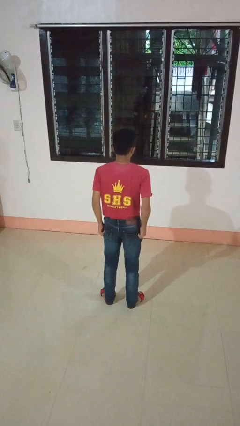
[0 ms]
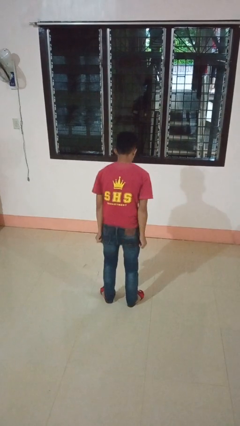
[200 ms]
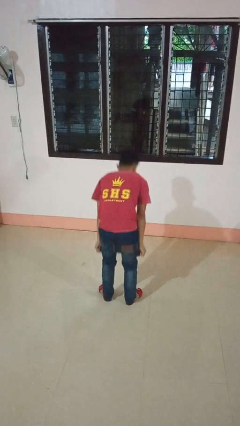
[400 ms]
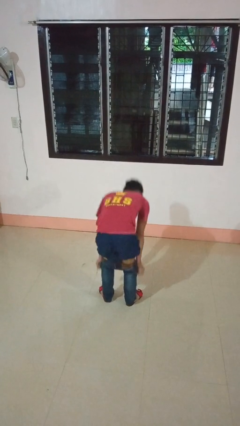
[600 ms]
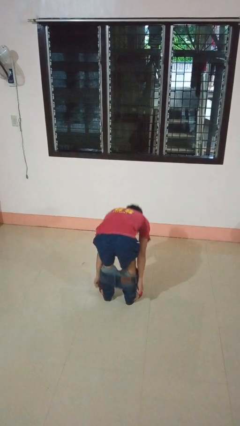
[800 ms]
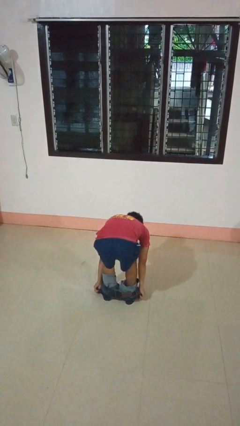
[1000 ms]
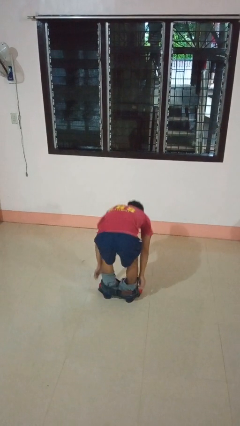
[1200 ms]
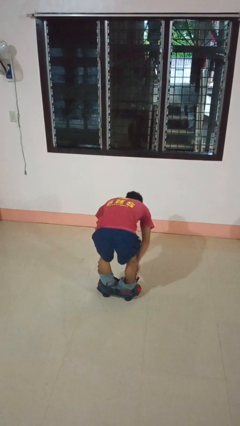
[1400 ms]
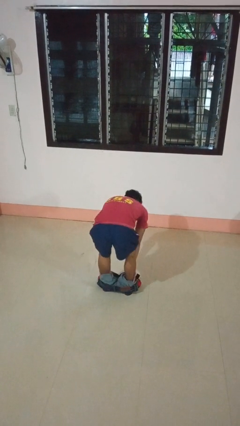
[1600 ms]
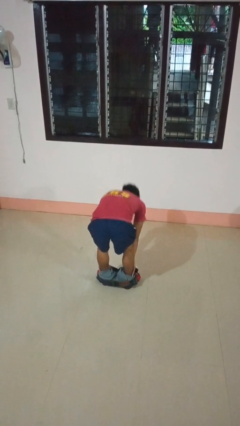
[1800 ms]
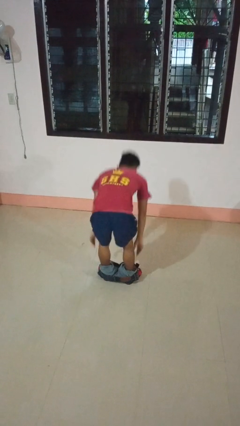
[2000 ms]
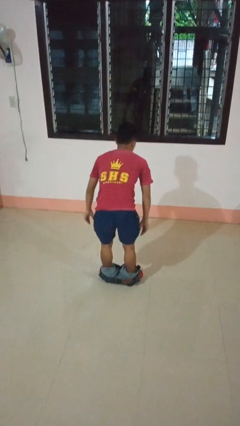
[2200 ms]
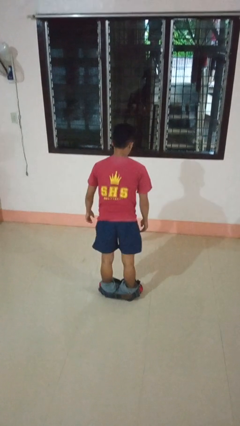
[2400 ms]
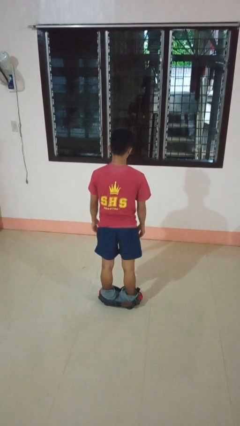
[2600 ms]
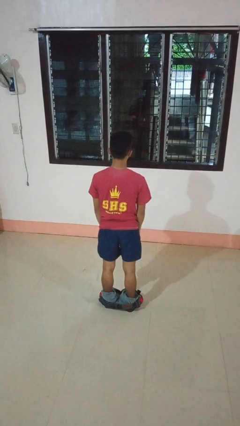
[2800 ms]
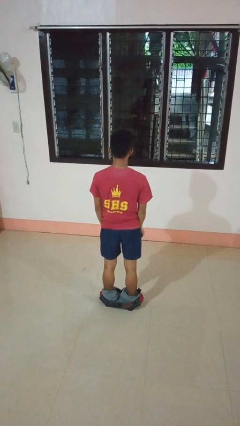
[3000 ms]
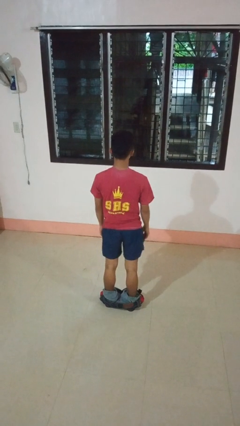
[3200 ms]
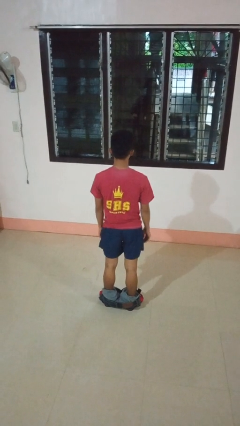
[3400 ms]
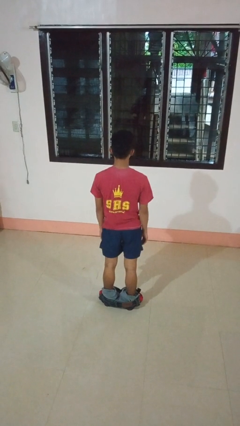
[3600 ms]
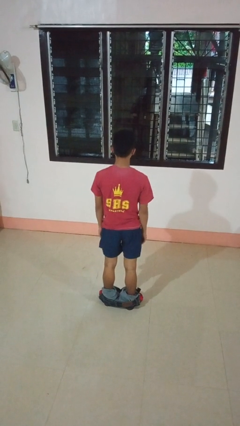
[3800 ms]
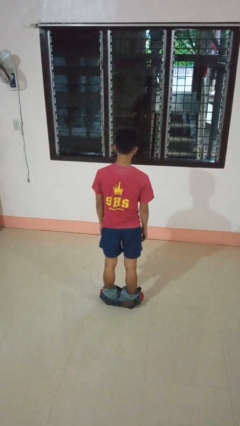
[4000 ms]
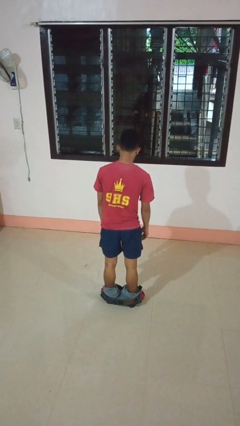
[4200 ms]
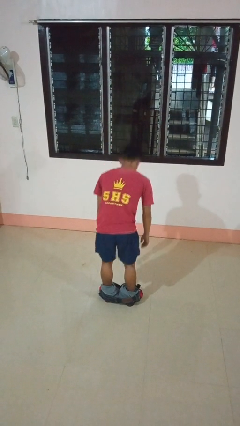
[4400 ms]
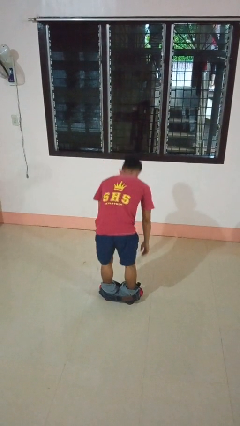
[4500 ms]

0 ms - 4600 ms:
person takes off pants

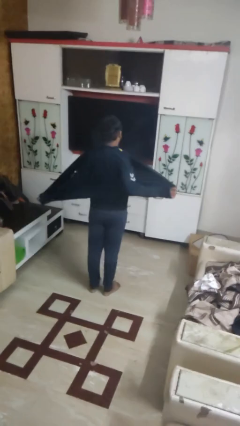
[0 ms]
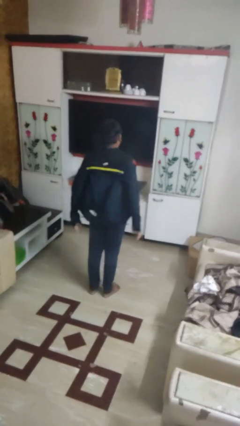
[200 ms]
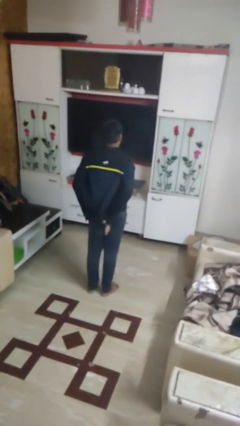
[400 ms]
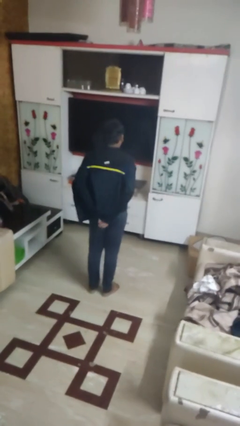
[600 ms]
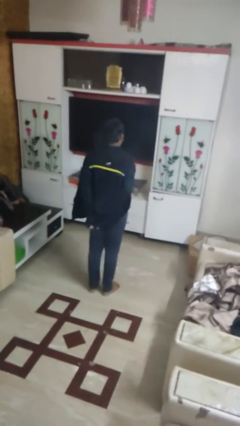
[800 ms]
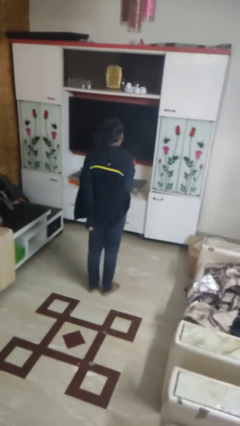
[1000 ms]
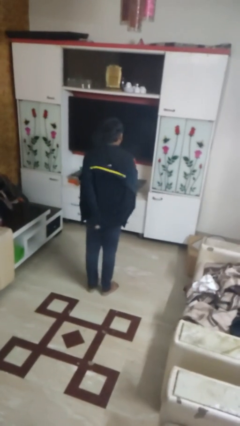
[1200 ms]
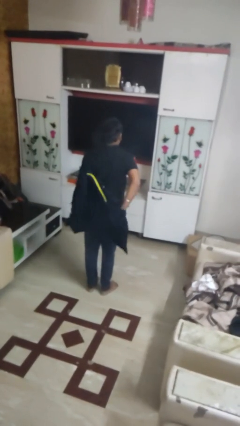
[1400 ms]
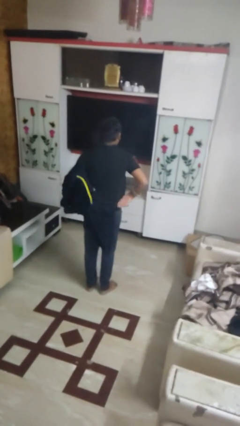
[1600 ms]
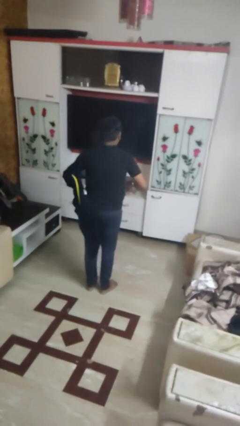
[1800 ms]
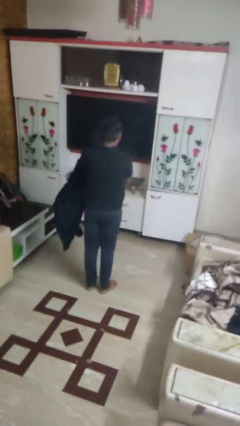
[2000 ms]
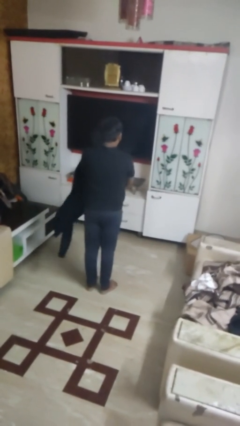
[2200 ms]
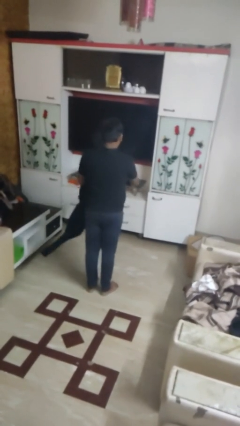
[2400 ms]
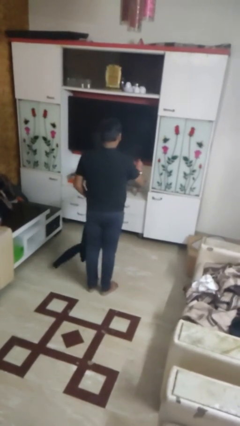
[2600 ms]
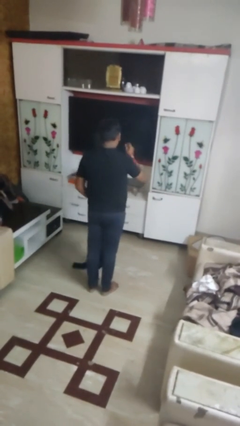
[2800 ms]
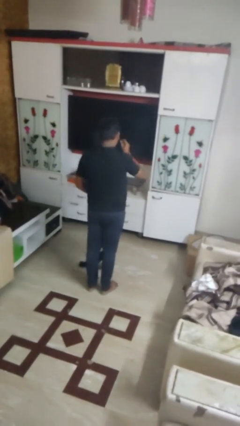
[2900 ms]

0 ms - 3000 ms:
person takes off jacket

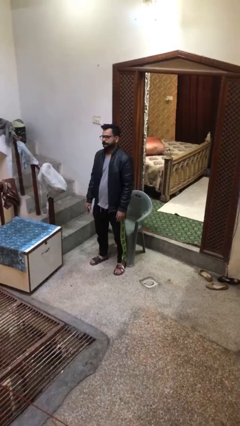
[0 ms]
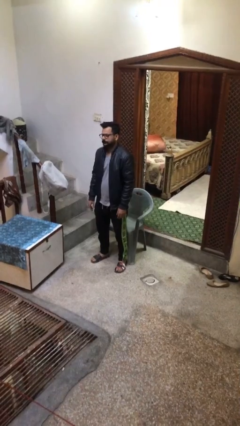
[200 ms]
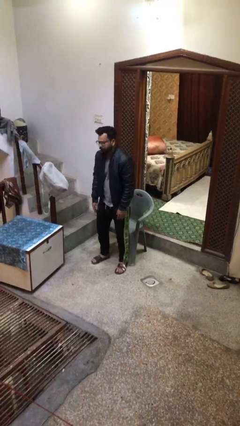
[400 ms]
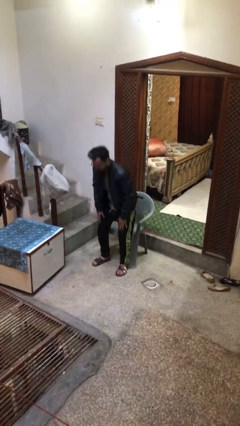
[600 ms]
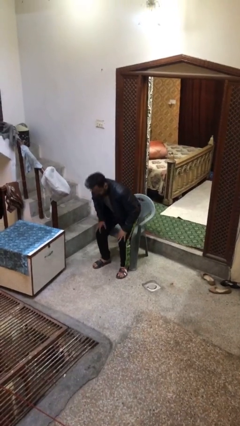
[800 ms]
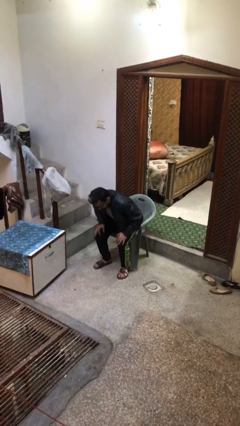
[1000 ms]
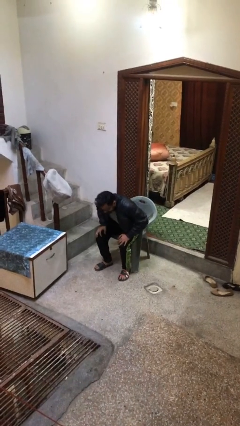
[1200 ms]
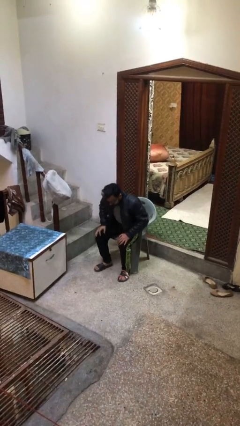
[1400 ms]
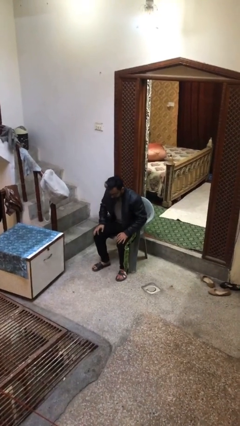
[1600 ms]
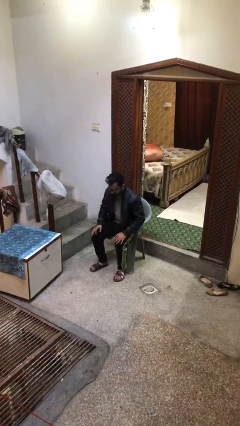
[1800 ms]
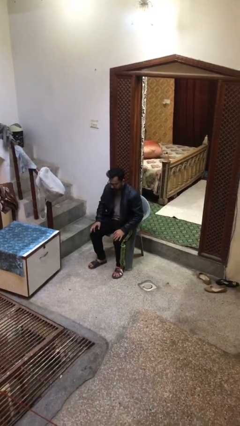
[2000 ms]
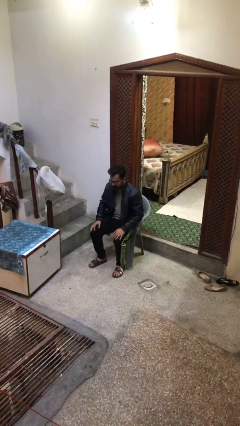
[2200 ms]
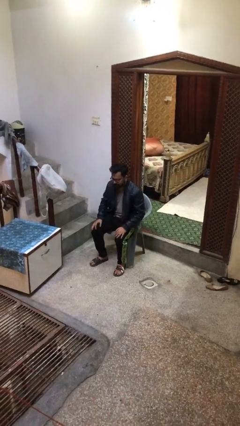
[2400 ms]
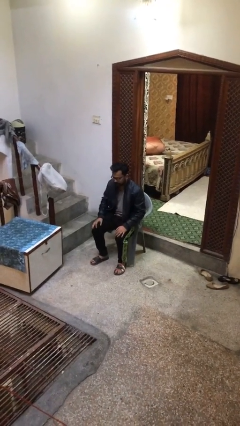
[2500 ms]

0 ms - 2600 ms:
person sits down

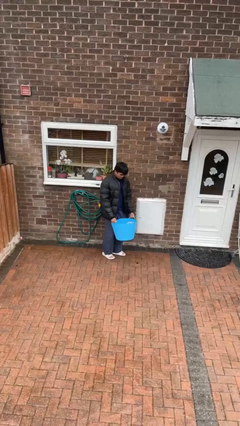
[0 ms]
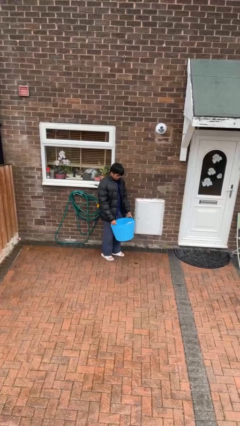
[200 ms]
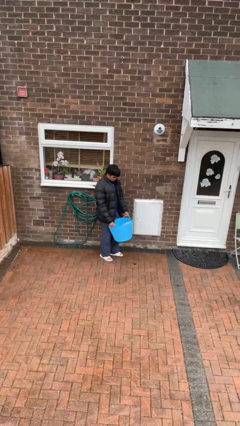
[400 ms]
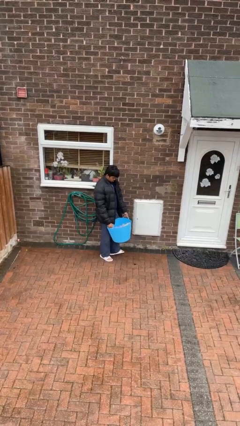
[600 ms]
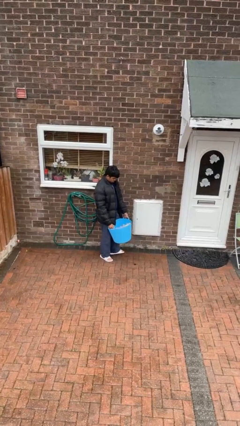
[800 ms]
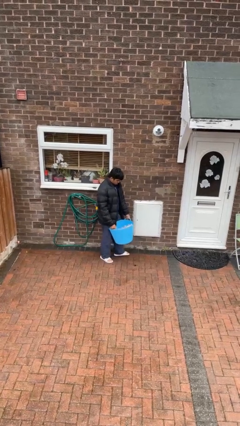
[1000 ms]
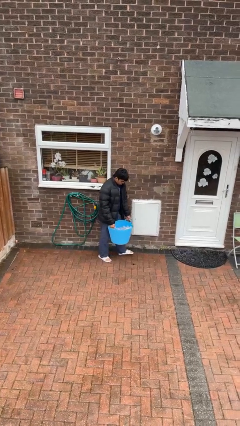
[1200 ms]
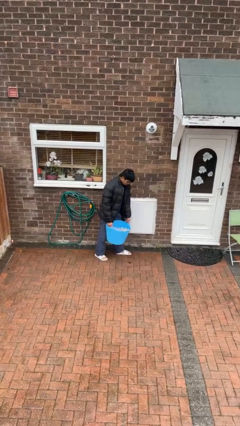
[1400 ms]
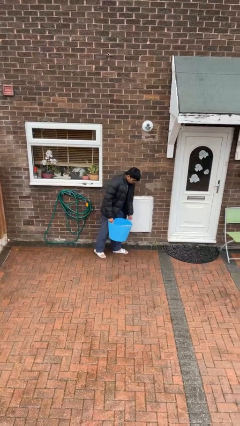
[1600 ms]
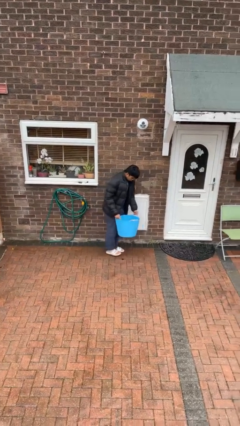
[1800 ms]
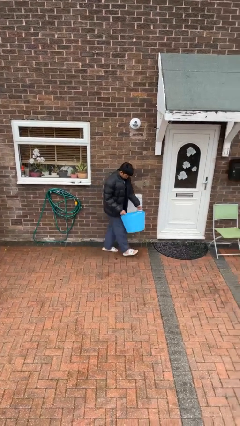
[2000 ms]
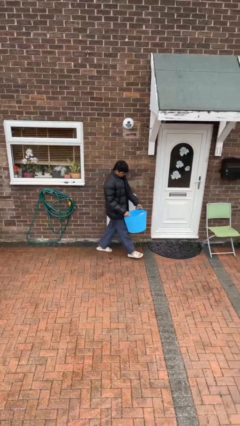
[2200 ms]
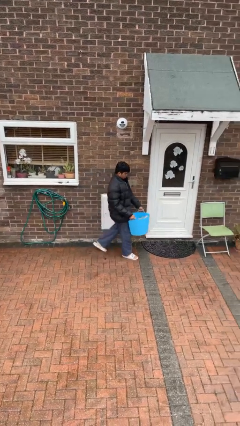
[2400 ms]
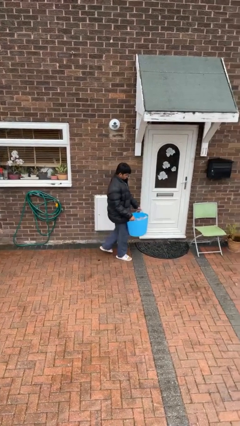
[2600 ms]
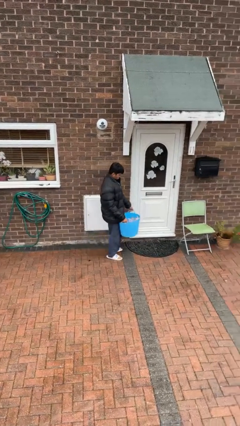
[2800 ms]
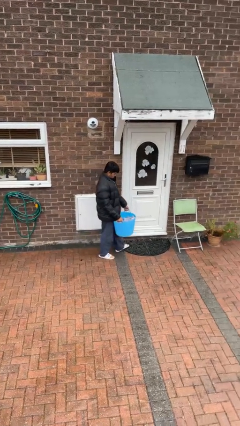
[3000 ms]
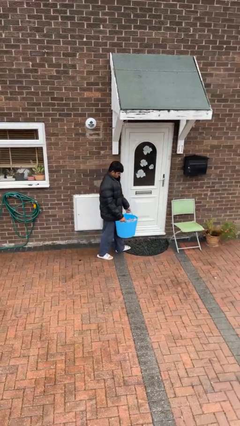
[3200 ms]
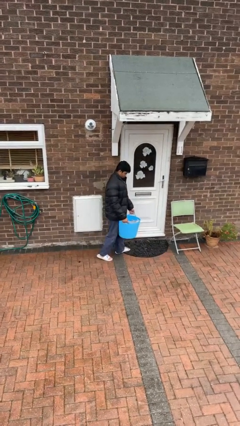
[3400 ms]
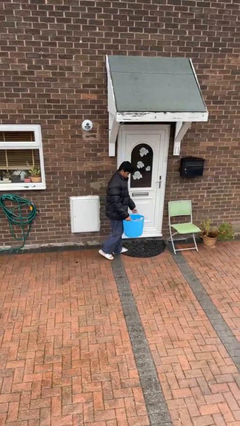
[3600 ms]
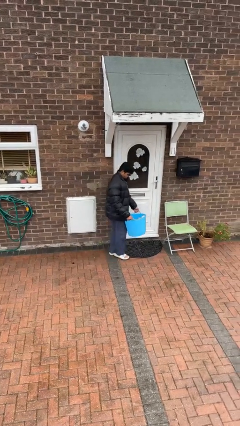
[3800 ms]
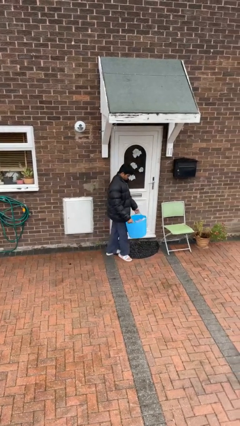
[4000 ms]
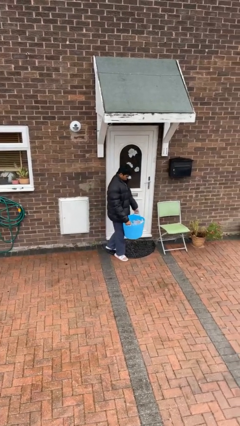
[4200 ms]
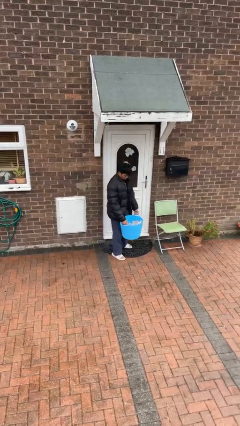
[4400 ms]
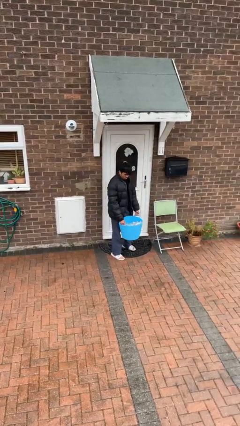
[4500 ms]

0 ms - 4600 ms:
person carries laundry basket

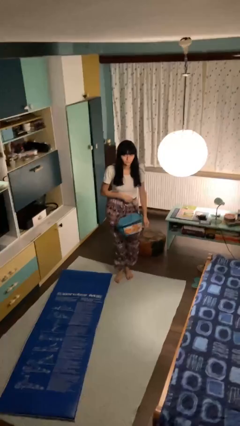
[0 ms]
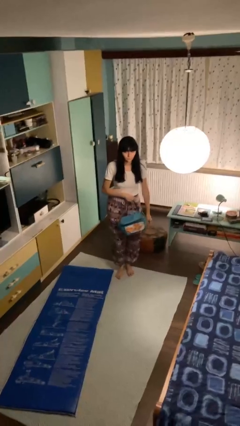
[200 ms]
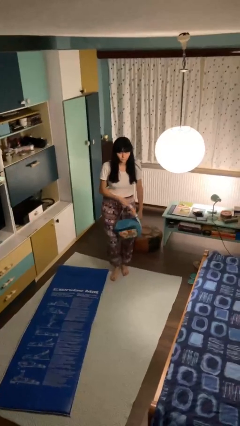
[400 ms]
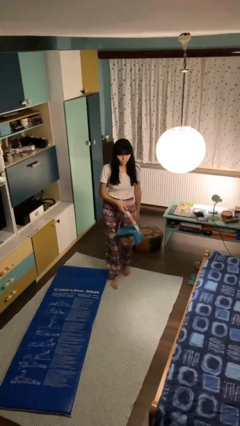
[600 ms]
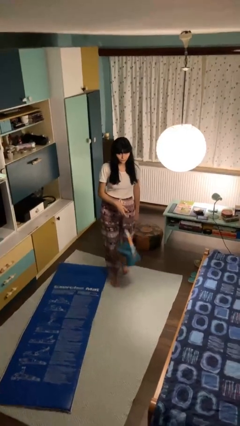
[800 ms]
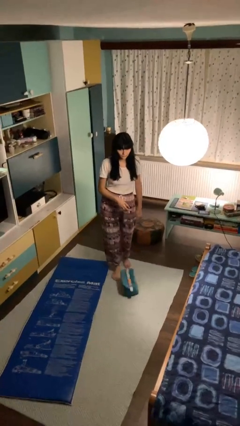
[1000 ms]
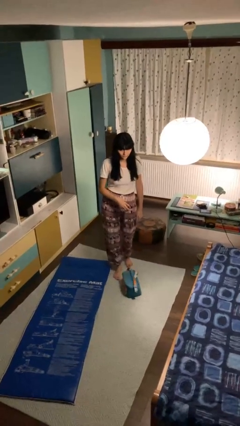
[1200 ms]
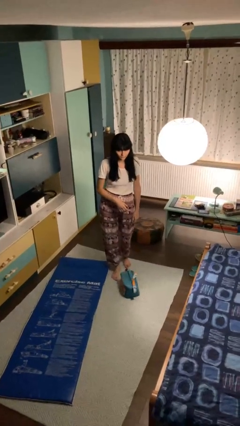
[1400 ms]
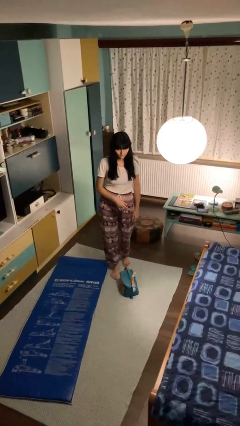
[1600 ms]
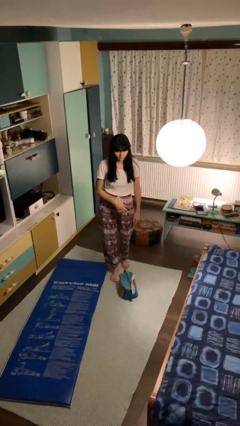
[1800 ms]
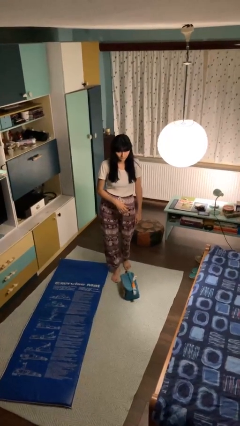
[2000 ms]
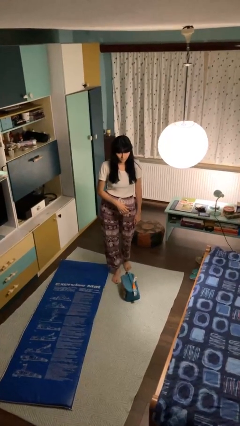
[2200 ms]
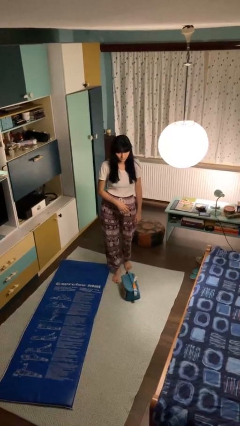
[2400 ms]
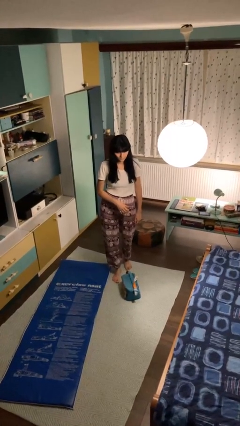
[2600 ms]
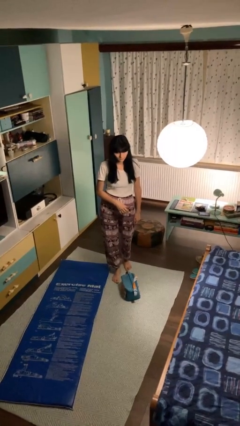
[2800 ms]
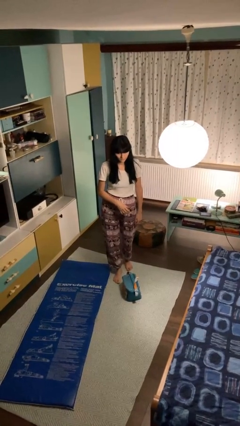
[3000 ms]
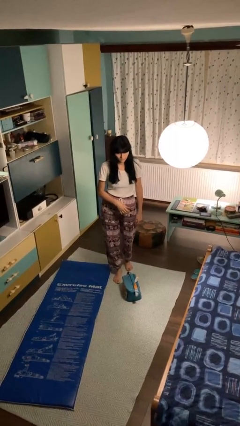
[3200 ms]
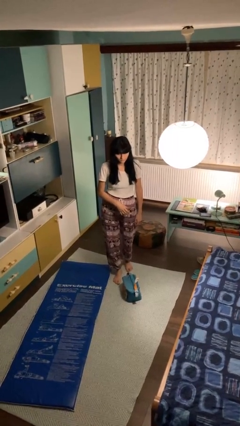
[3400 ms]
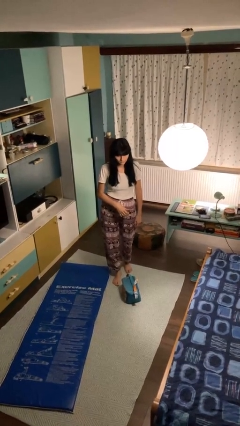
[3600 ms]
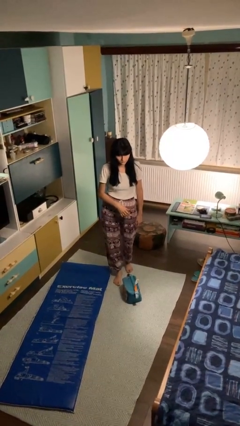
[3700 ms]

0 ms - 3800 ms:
person drops object
